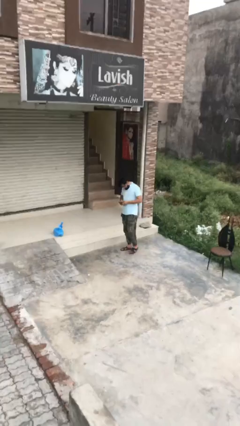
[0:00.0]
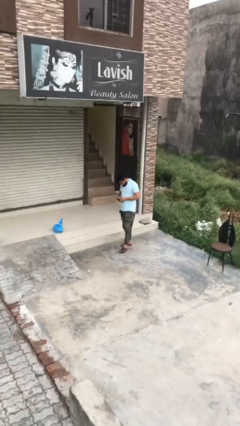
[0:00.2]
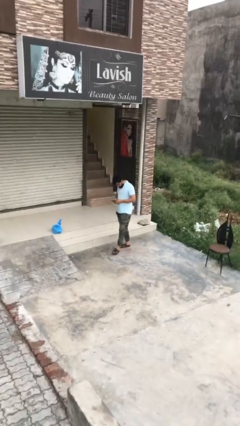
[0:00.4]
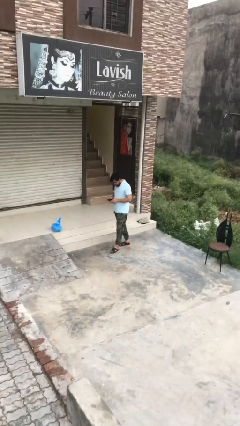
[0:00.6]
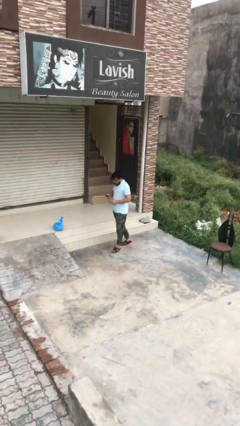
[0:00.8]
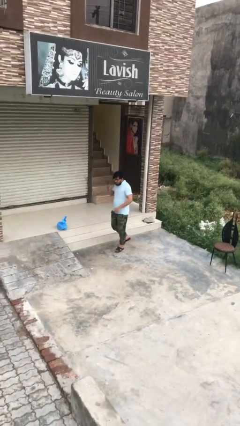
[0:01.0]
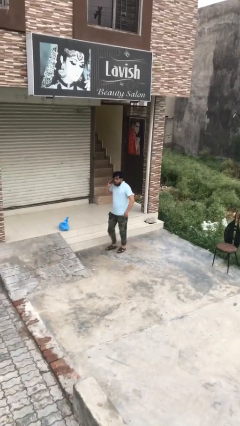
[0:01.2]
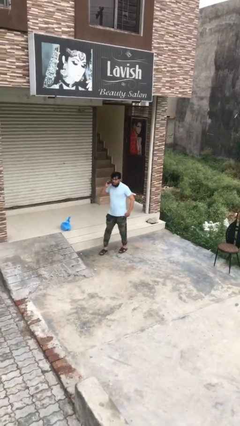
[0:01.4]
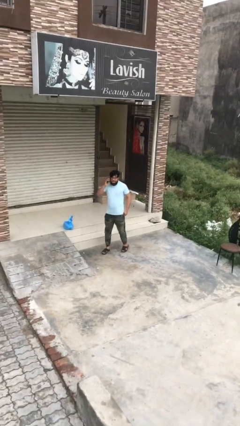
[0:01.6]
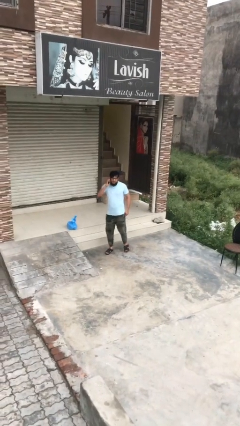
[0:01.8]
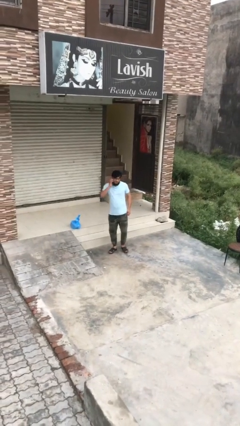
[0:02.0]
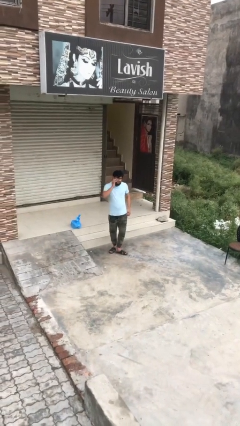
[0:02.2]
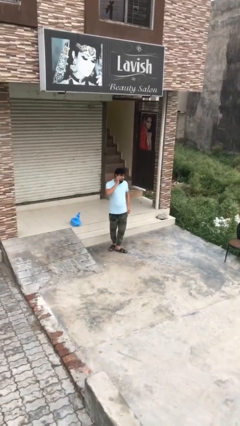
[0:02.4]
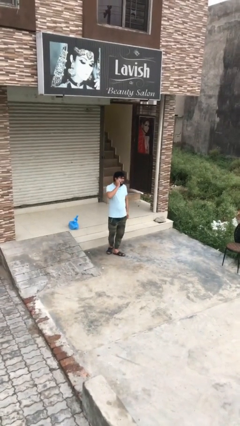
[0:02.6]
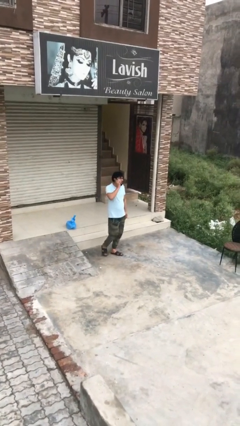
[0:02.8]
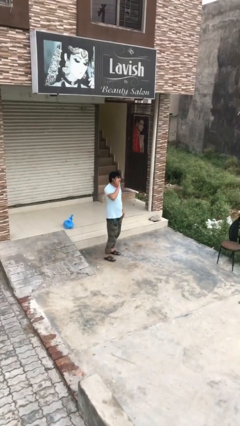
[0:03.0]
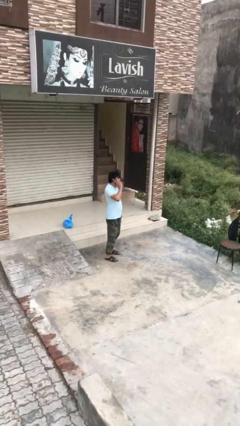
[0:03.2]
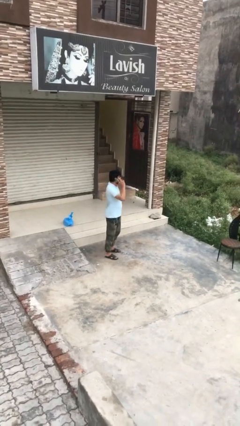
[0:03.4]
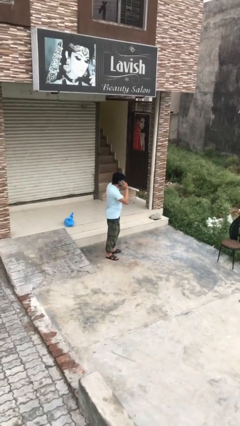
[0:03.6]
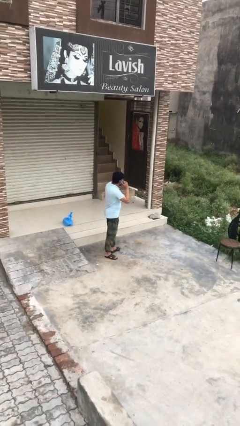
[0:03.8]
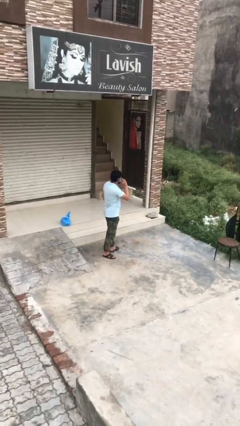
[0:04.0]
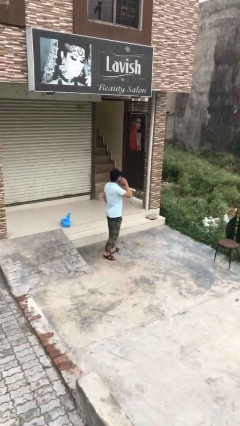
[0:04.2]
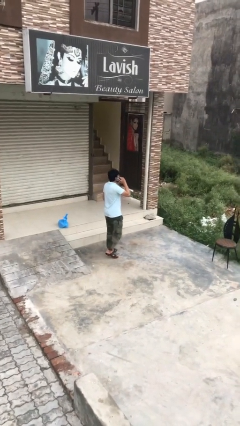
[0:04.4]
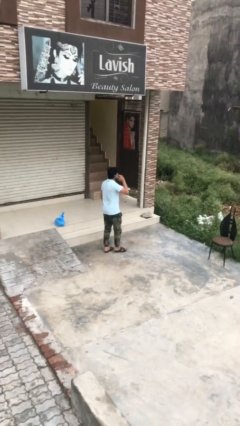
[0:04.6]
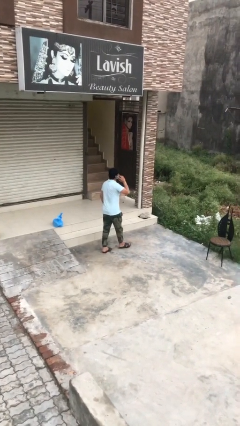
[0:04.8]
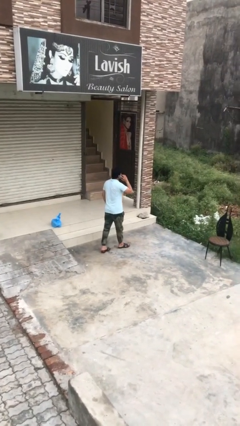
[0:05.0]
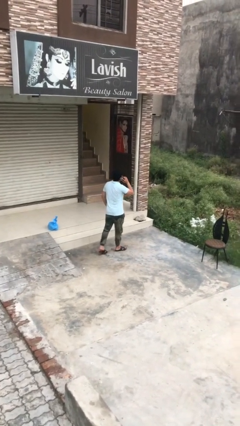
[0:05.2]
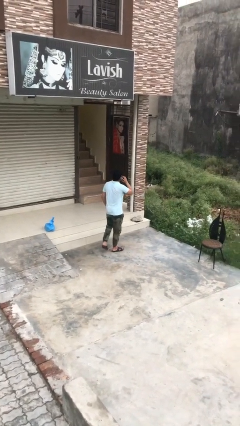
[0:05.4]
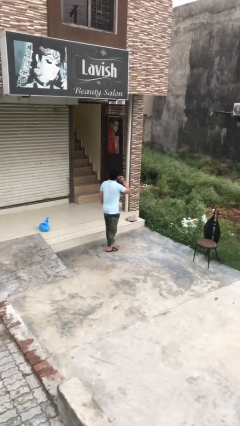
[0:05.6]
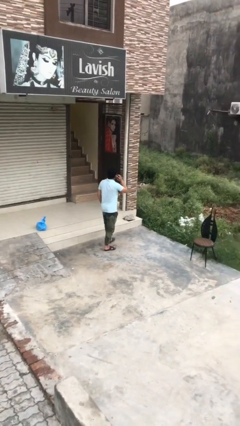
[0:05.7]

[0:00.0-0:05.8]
person talks on phone

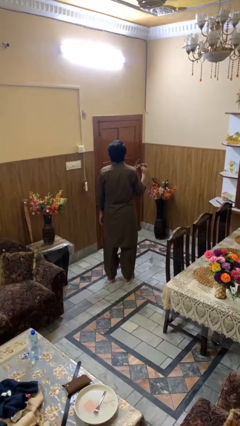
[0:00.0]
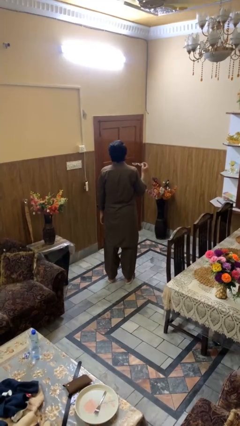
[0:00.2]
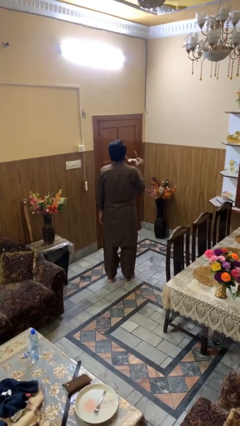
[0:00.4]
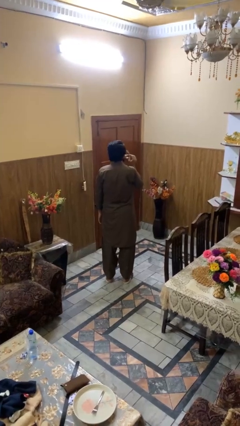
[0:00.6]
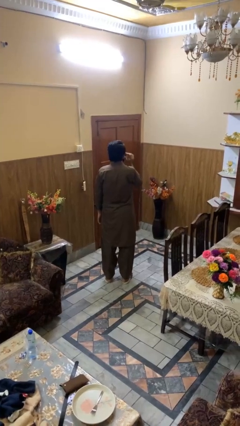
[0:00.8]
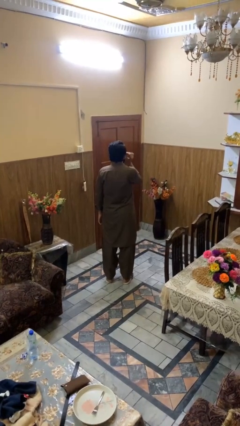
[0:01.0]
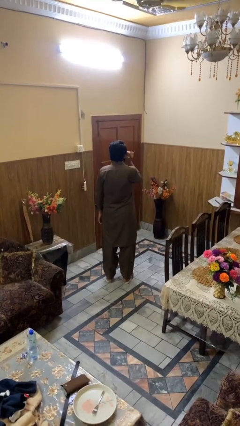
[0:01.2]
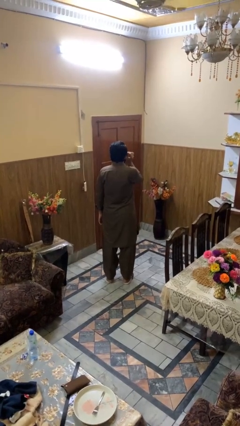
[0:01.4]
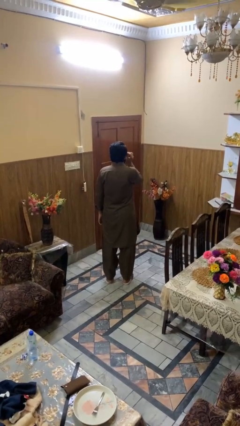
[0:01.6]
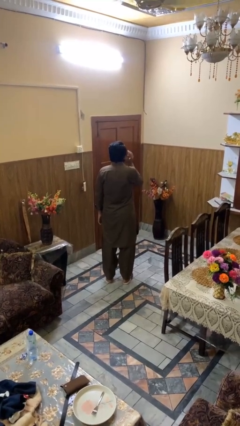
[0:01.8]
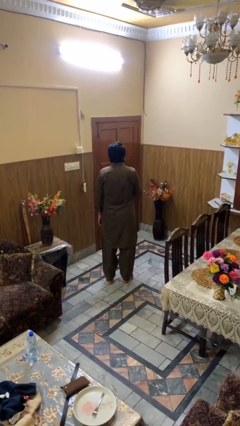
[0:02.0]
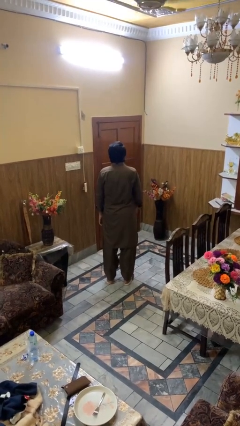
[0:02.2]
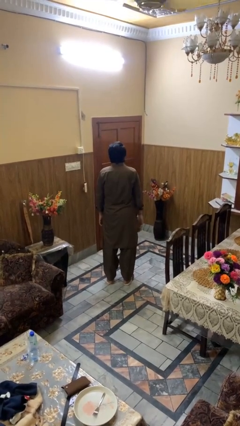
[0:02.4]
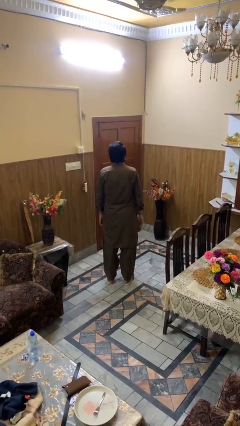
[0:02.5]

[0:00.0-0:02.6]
person puts on sunglasses

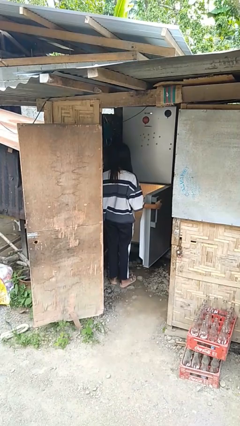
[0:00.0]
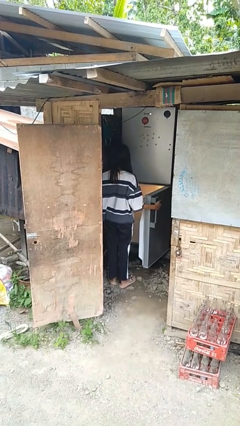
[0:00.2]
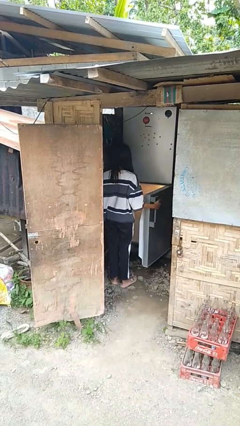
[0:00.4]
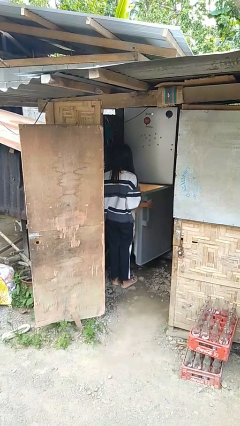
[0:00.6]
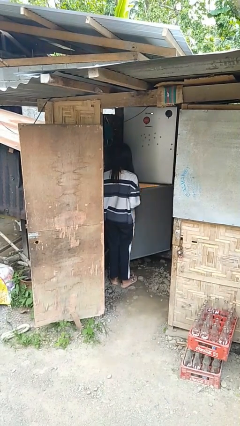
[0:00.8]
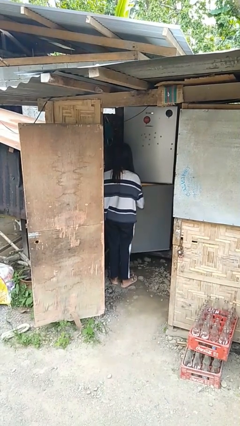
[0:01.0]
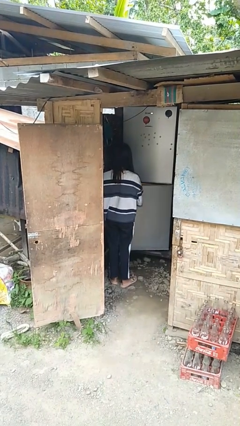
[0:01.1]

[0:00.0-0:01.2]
person closes refrigerator

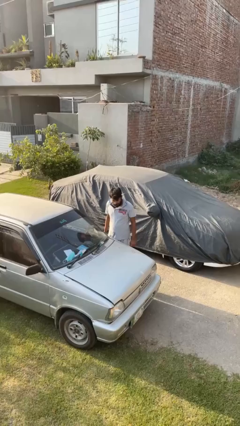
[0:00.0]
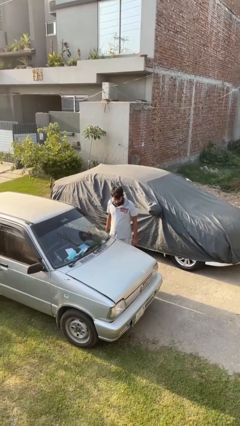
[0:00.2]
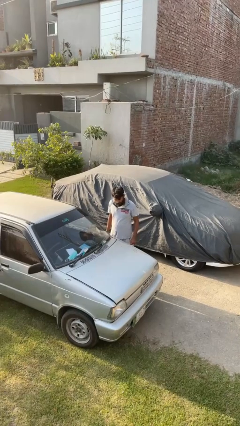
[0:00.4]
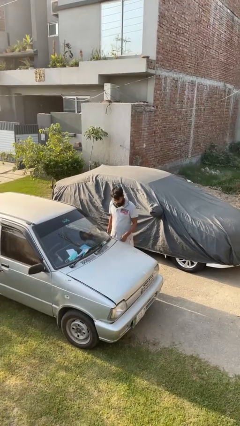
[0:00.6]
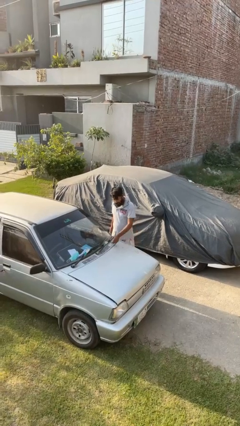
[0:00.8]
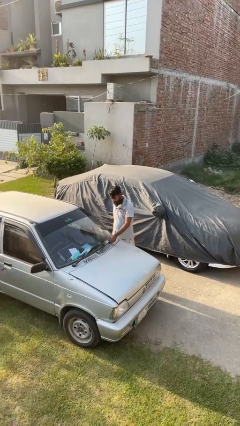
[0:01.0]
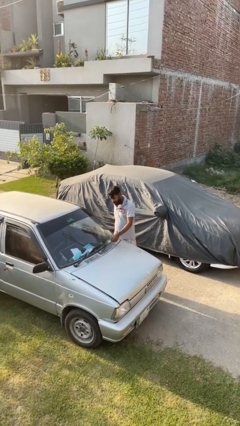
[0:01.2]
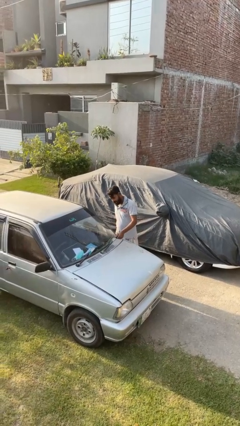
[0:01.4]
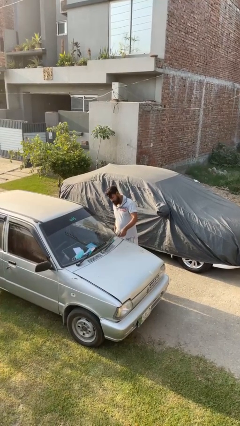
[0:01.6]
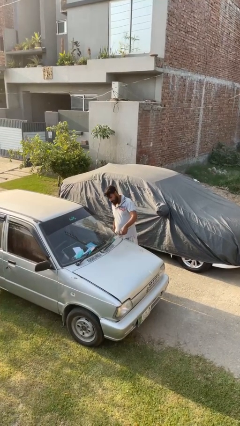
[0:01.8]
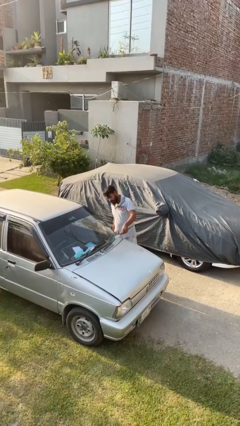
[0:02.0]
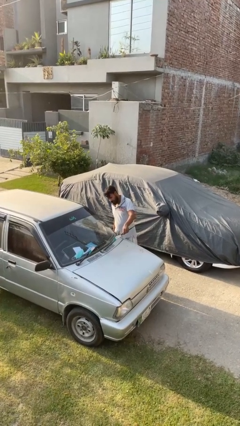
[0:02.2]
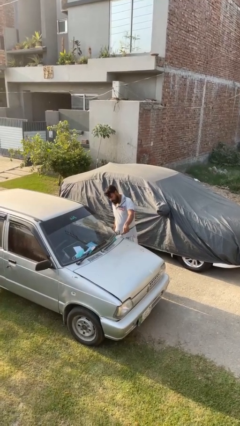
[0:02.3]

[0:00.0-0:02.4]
person flips up car wipers

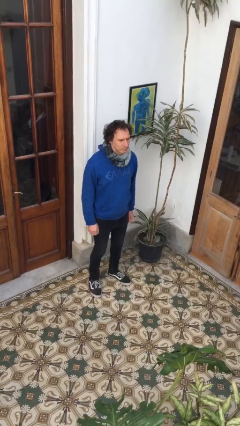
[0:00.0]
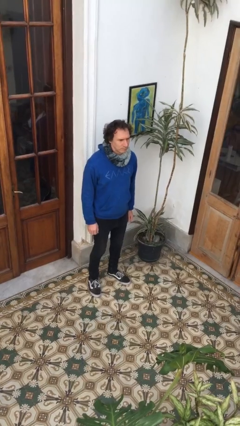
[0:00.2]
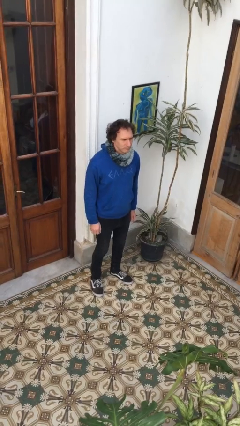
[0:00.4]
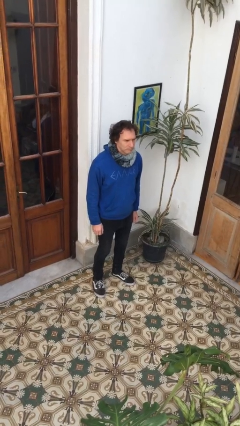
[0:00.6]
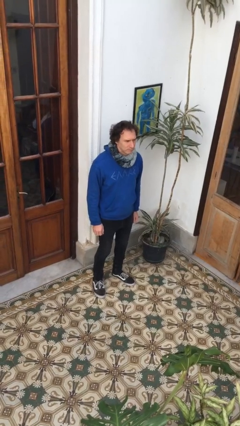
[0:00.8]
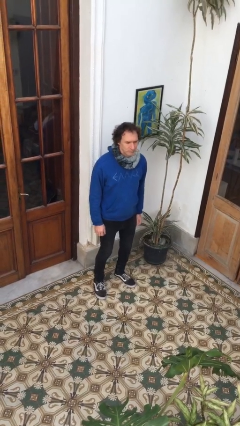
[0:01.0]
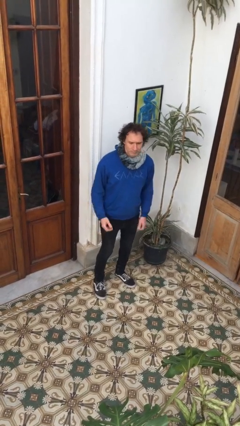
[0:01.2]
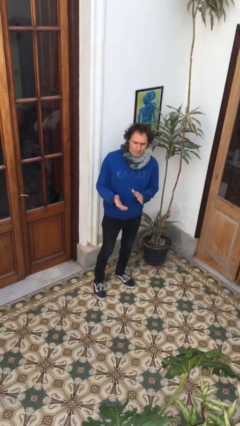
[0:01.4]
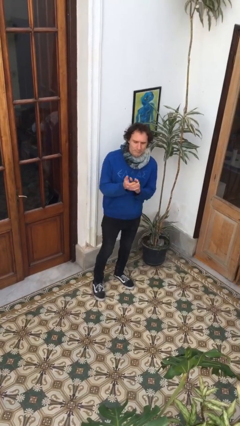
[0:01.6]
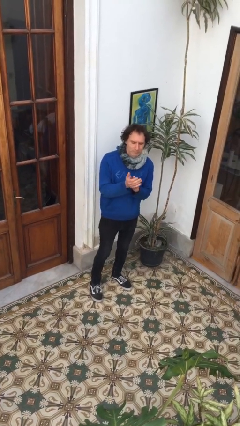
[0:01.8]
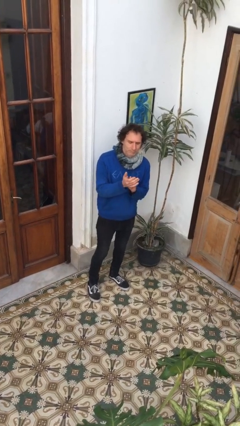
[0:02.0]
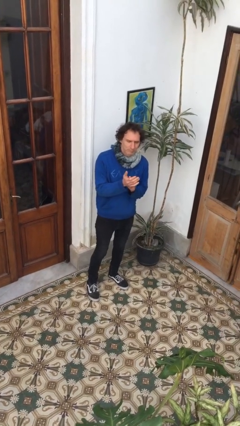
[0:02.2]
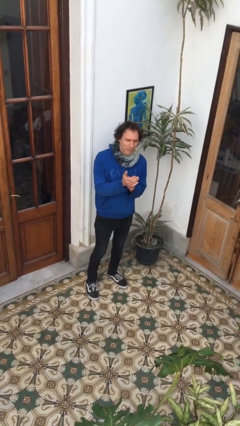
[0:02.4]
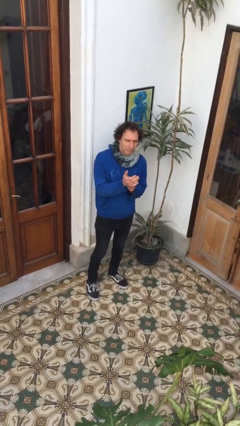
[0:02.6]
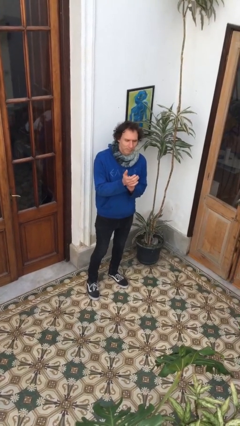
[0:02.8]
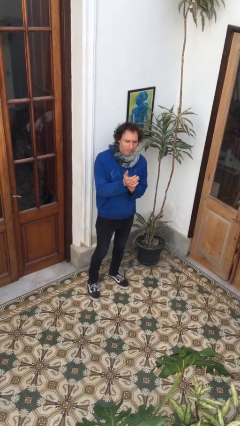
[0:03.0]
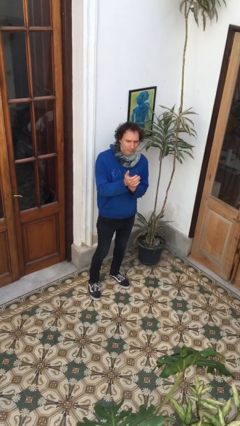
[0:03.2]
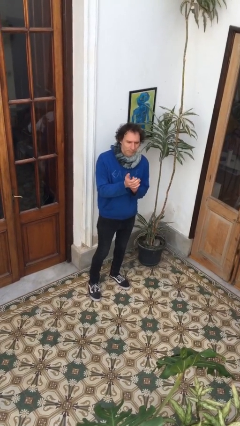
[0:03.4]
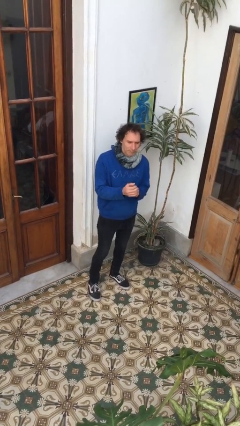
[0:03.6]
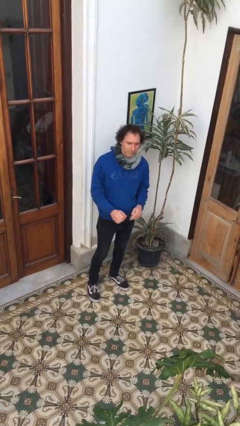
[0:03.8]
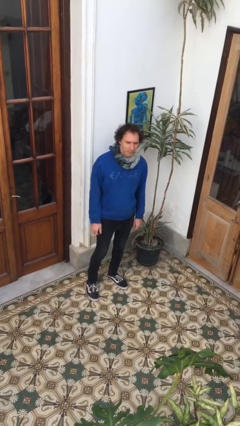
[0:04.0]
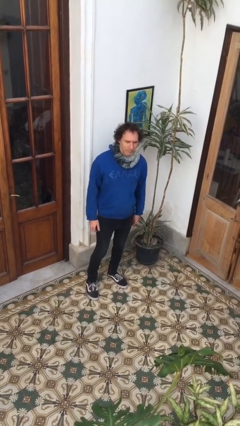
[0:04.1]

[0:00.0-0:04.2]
person claps hands

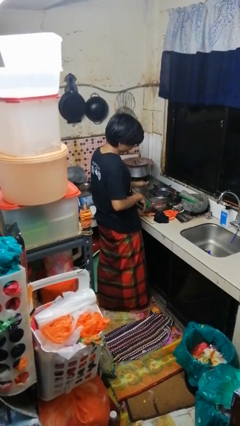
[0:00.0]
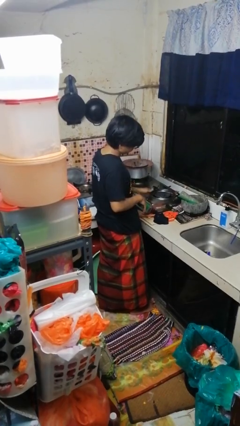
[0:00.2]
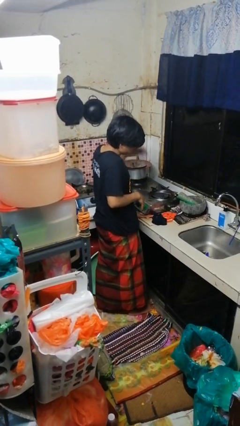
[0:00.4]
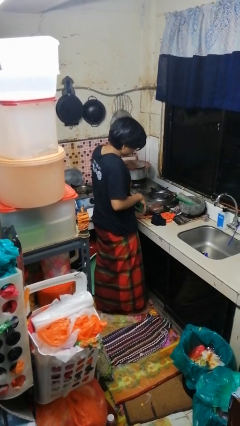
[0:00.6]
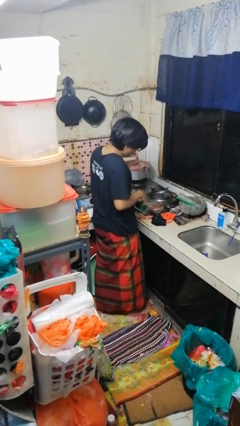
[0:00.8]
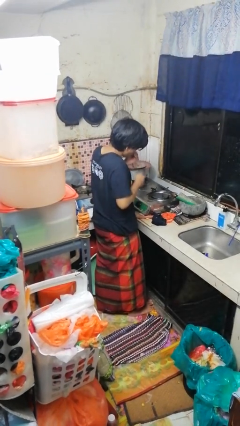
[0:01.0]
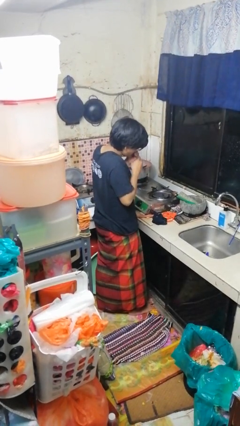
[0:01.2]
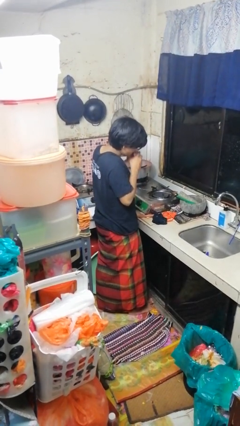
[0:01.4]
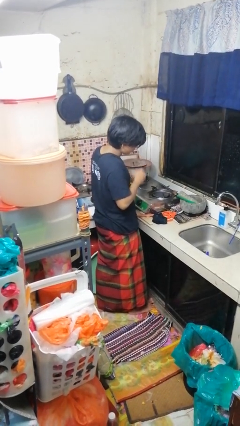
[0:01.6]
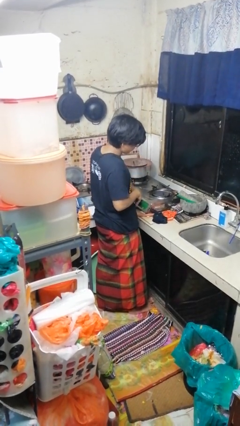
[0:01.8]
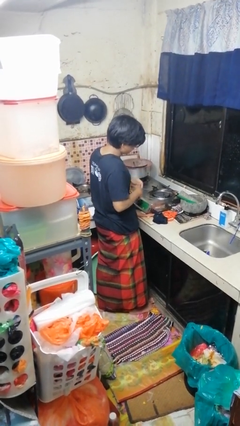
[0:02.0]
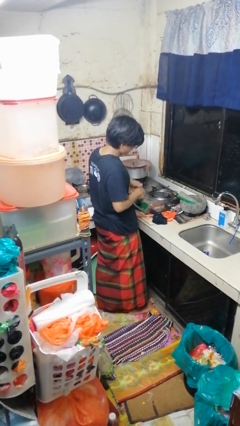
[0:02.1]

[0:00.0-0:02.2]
person burns hand
